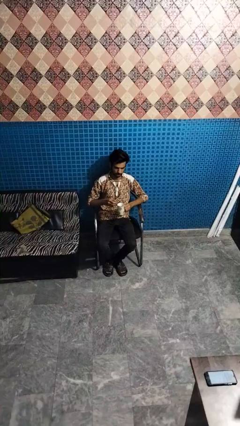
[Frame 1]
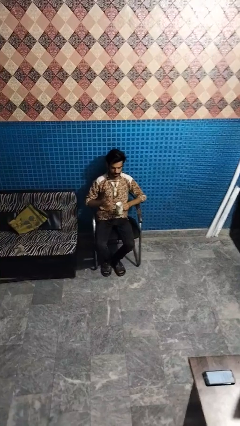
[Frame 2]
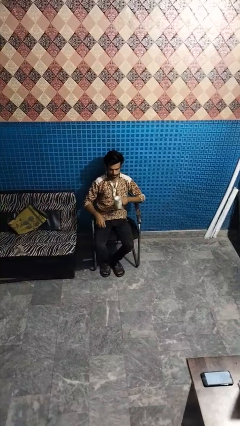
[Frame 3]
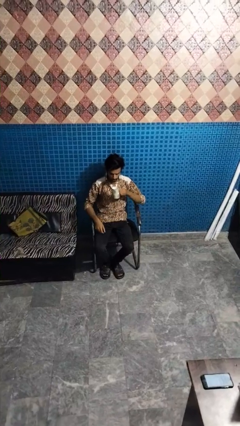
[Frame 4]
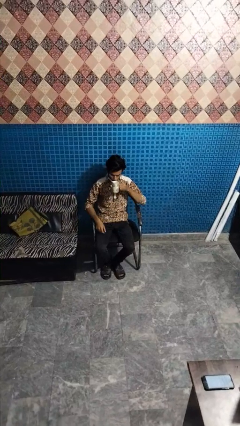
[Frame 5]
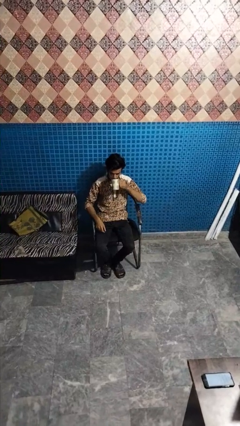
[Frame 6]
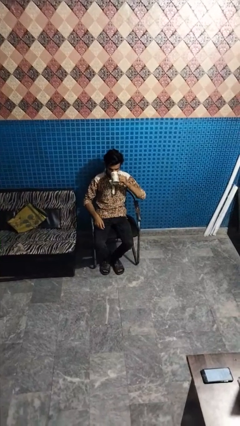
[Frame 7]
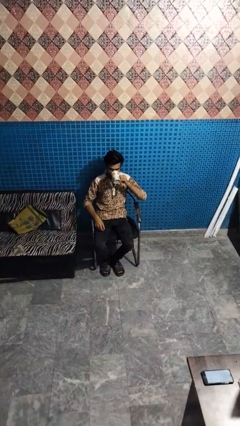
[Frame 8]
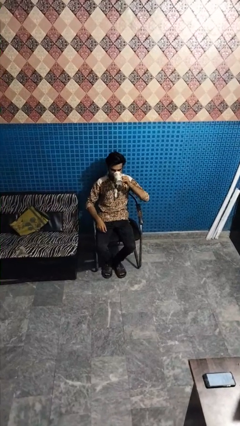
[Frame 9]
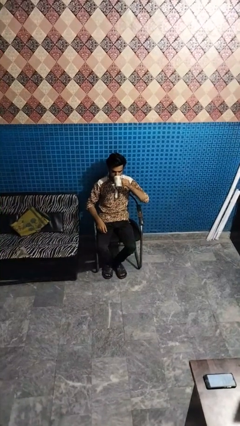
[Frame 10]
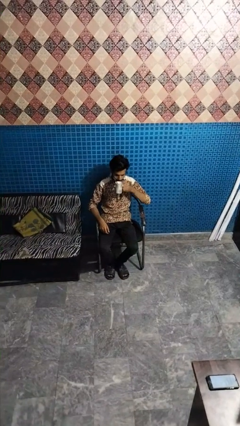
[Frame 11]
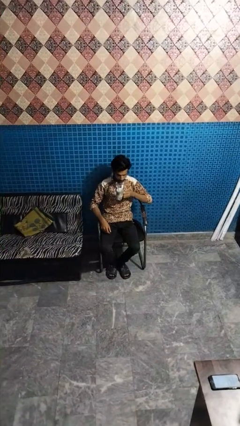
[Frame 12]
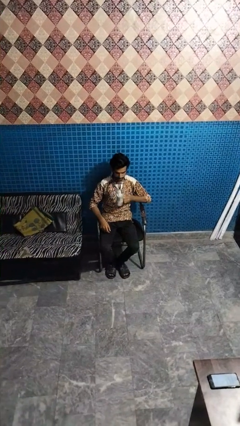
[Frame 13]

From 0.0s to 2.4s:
person drinks from mug

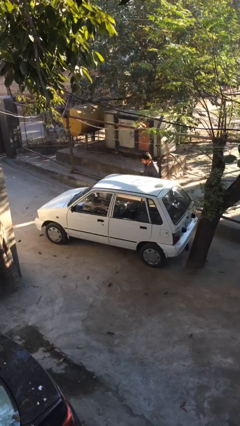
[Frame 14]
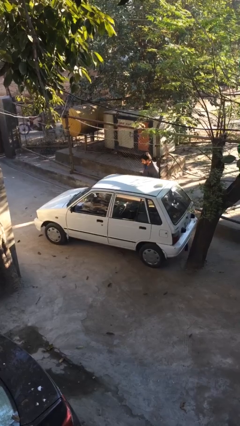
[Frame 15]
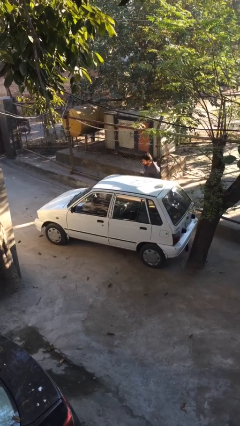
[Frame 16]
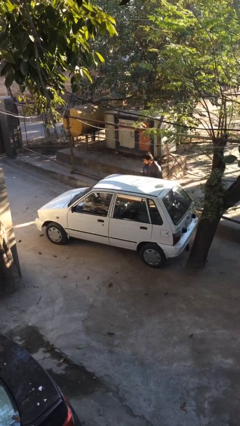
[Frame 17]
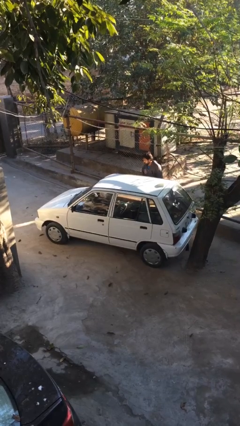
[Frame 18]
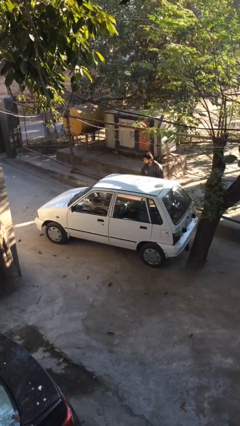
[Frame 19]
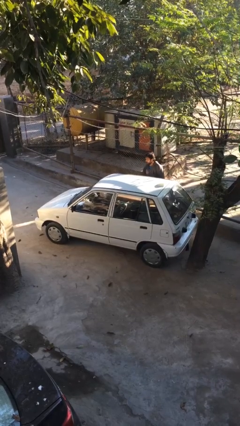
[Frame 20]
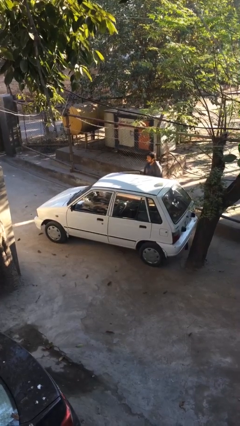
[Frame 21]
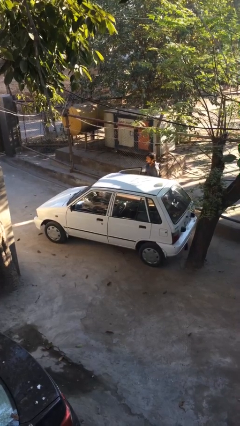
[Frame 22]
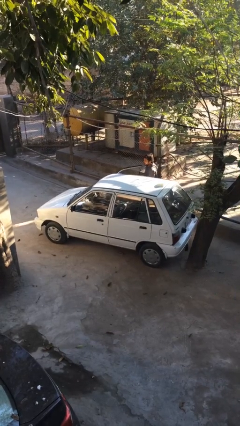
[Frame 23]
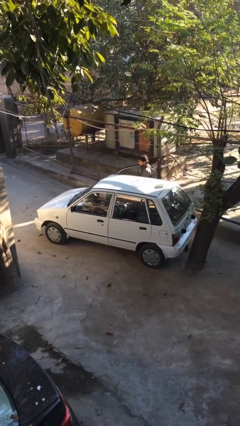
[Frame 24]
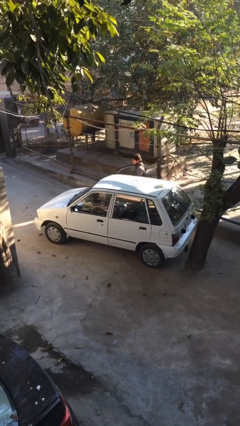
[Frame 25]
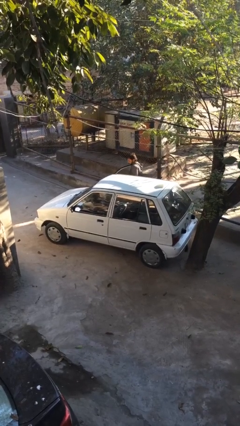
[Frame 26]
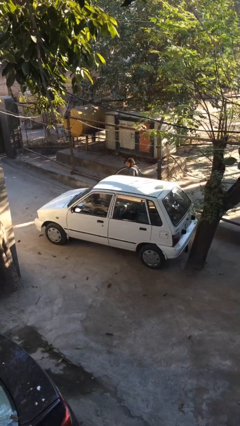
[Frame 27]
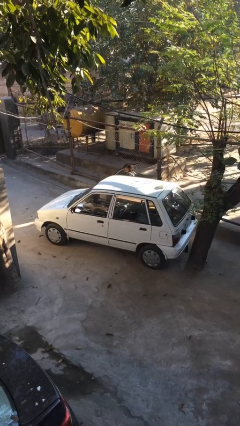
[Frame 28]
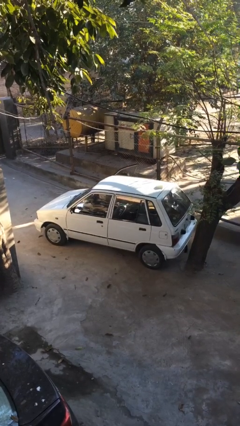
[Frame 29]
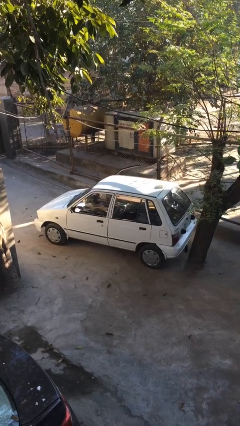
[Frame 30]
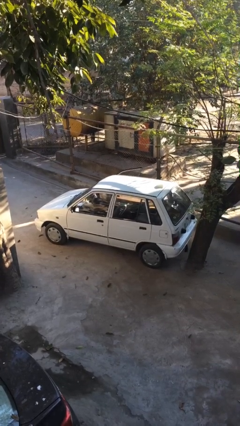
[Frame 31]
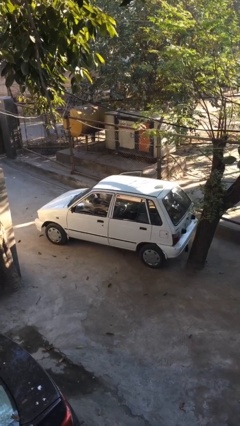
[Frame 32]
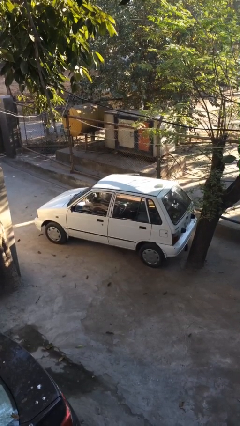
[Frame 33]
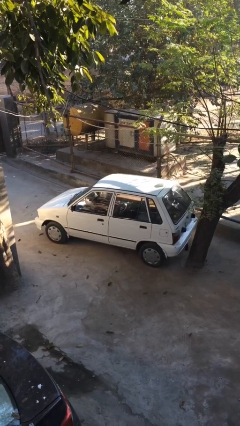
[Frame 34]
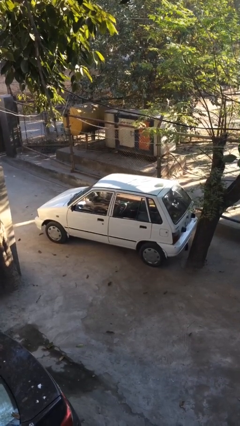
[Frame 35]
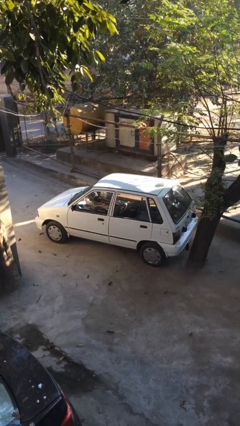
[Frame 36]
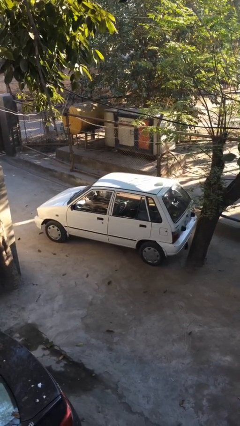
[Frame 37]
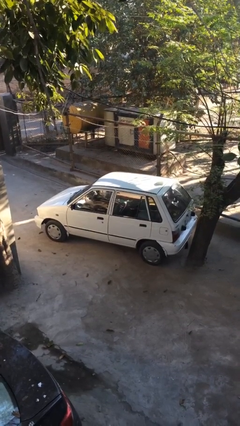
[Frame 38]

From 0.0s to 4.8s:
car picks up person

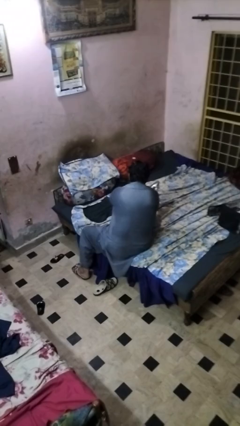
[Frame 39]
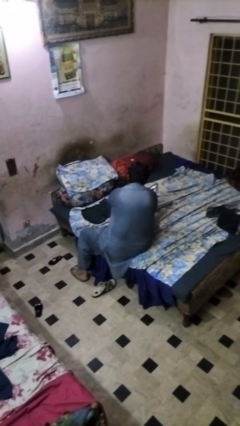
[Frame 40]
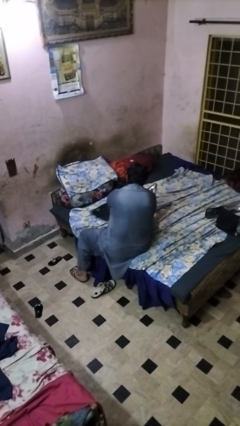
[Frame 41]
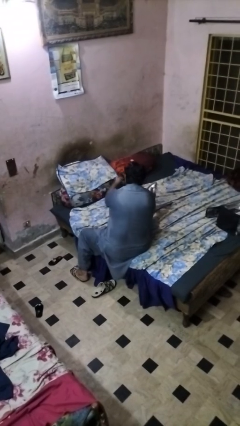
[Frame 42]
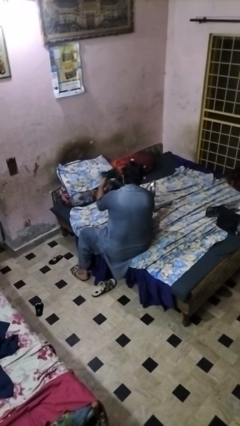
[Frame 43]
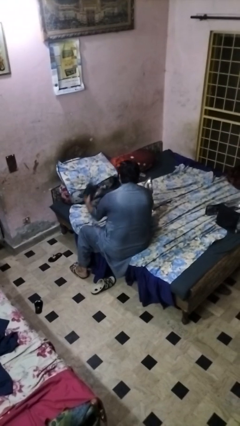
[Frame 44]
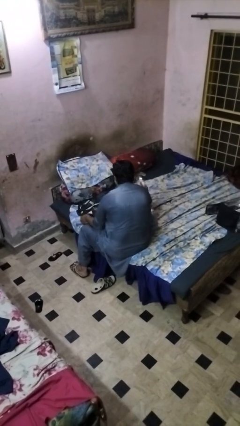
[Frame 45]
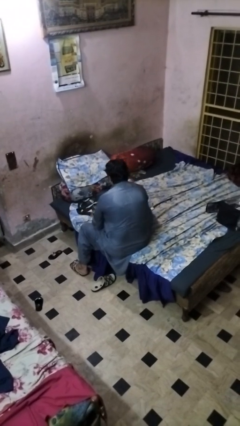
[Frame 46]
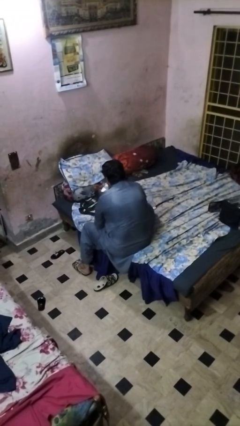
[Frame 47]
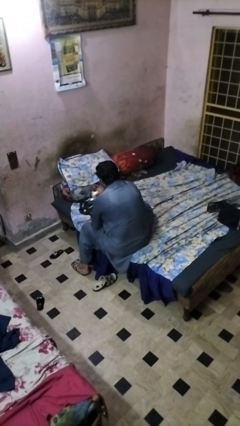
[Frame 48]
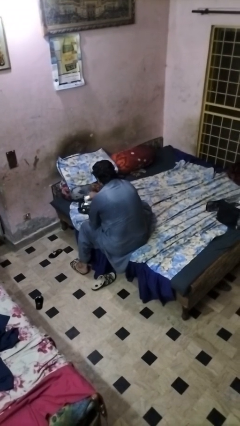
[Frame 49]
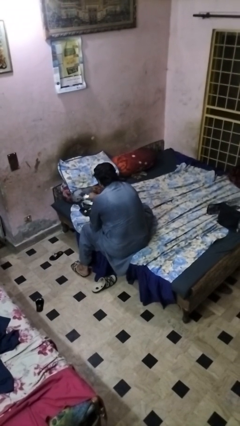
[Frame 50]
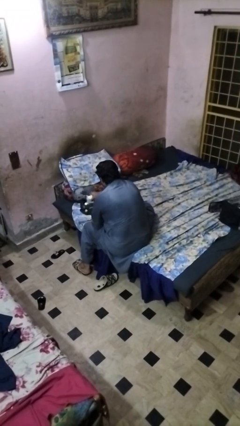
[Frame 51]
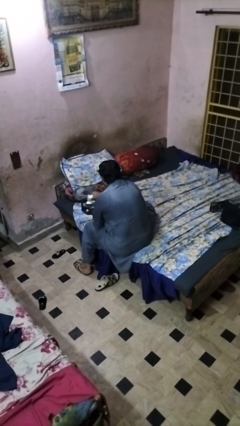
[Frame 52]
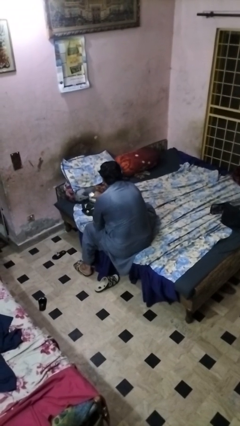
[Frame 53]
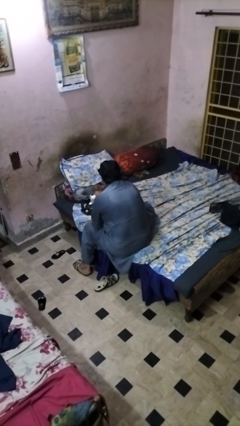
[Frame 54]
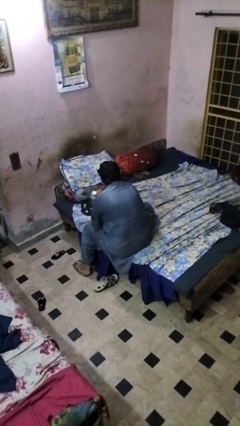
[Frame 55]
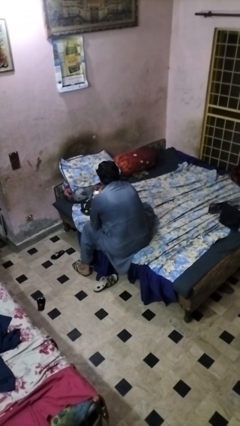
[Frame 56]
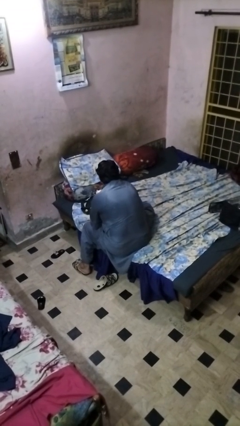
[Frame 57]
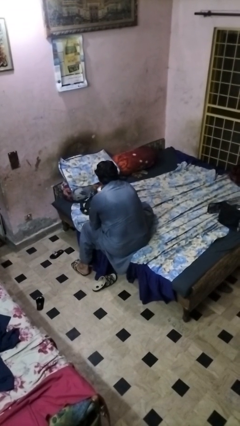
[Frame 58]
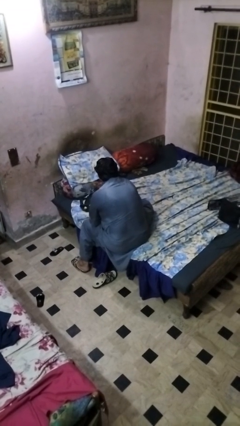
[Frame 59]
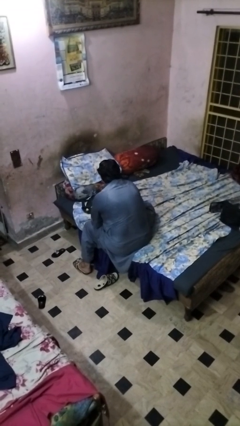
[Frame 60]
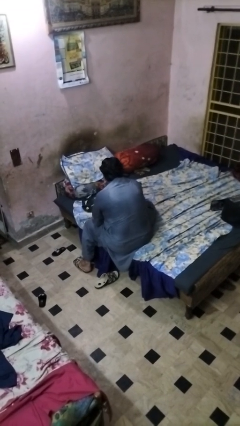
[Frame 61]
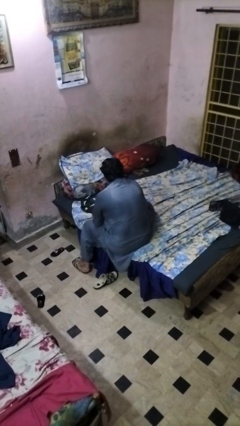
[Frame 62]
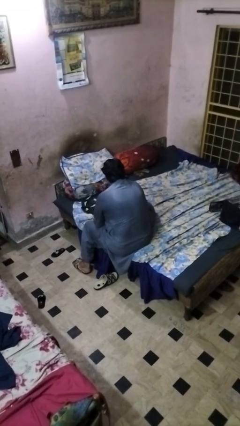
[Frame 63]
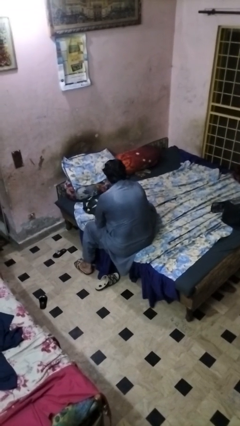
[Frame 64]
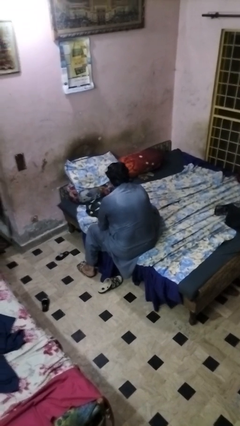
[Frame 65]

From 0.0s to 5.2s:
person irons clothes

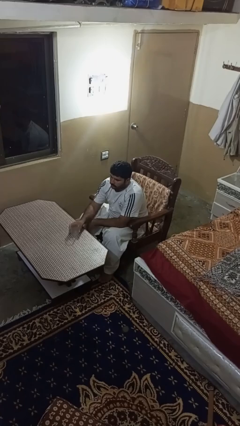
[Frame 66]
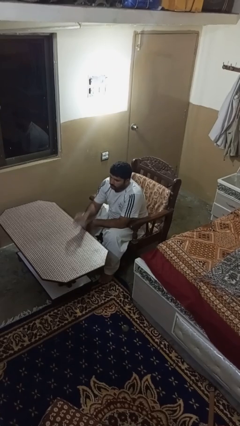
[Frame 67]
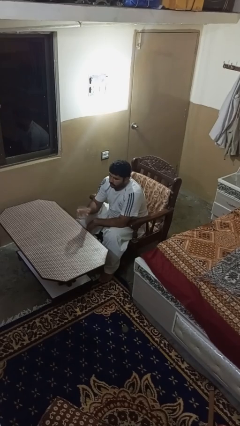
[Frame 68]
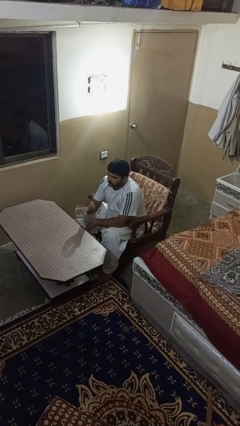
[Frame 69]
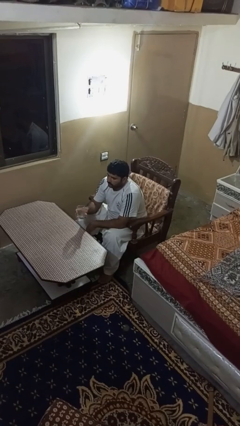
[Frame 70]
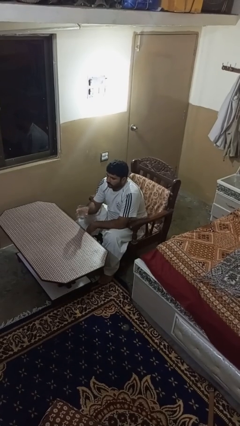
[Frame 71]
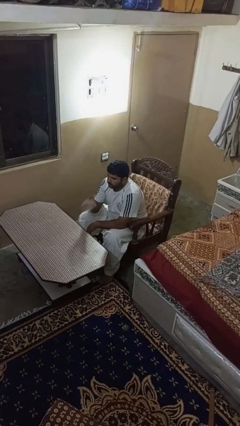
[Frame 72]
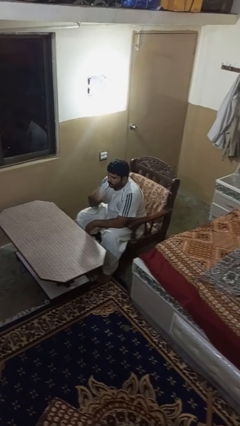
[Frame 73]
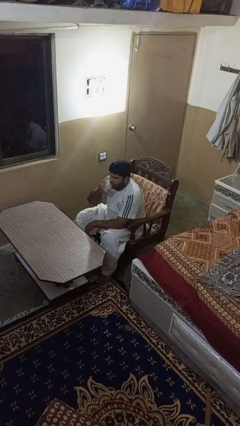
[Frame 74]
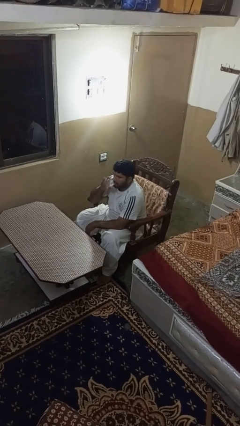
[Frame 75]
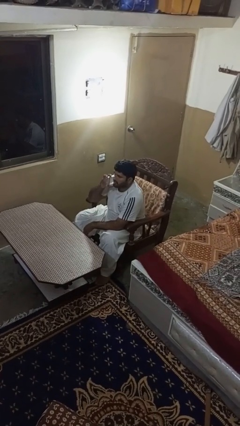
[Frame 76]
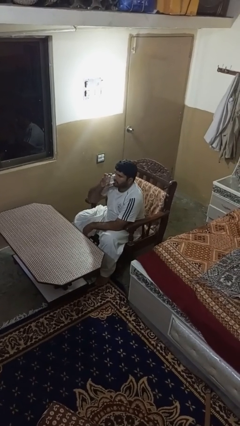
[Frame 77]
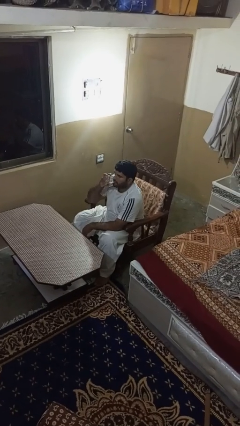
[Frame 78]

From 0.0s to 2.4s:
person drinks from shotglass

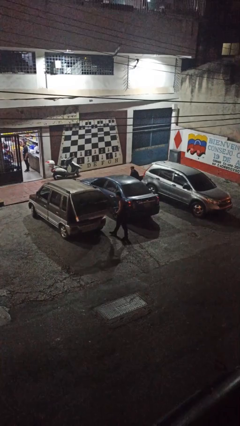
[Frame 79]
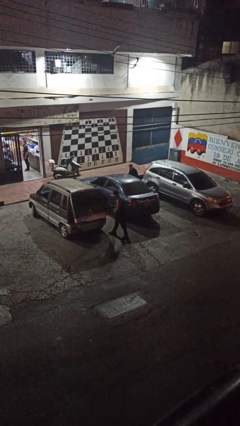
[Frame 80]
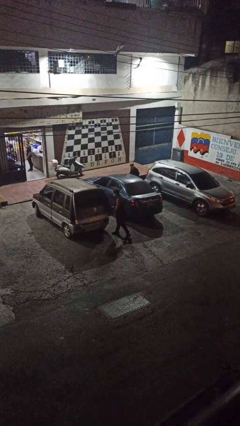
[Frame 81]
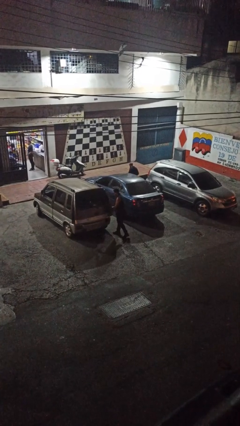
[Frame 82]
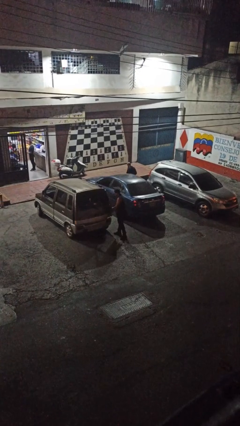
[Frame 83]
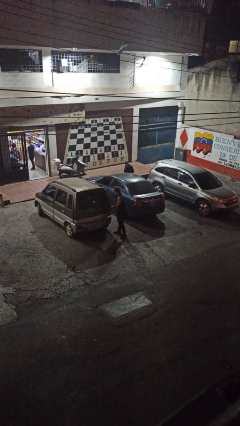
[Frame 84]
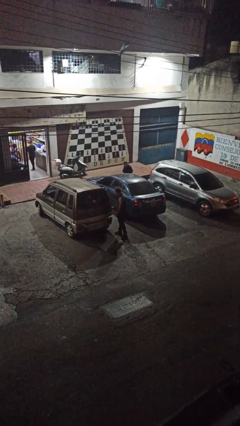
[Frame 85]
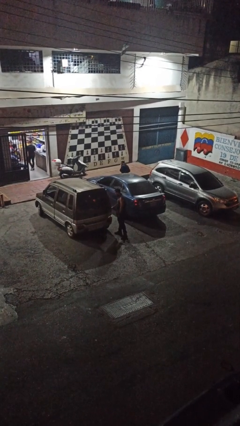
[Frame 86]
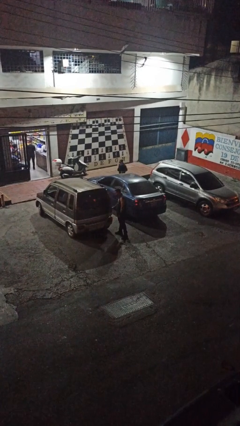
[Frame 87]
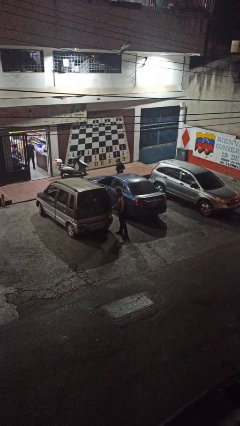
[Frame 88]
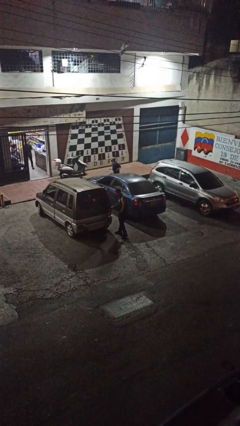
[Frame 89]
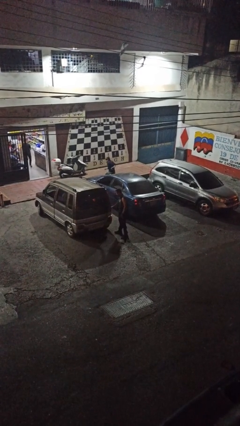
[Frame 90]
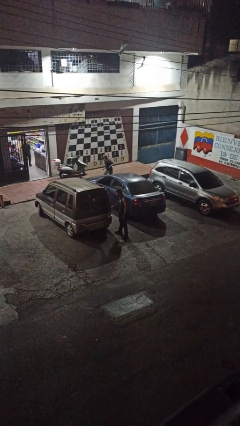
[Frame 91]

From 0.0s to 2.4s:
person closes car trunk

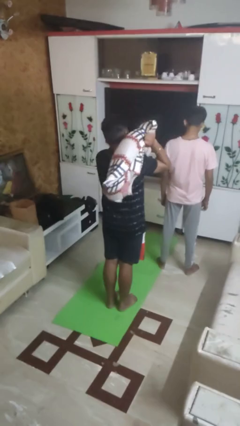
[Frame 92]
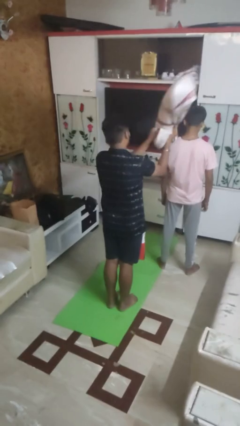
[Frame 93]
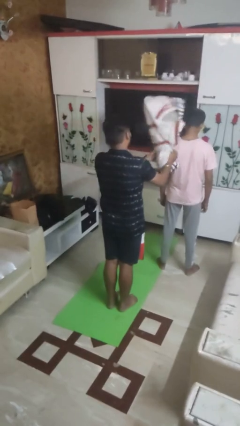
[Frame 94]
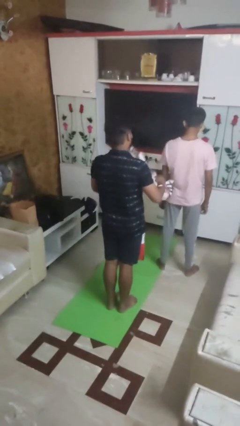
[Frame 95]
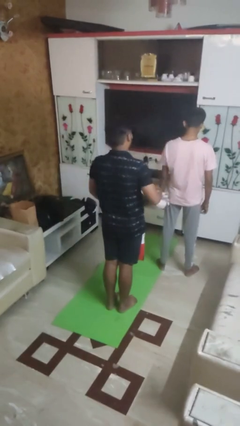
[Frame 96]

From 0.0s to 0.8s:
person hits person with pillow
